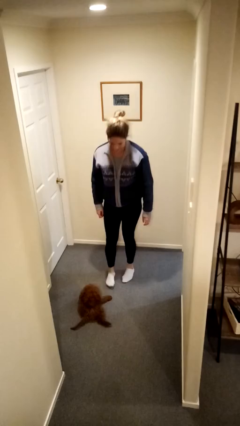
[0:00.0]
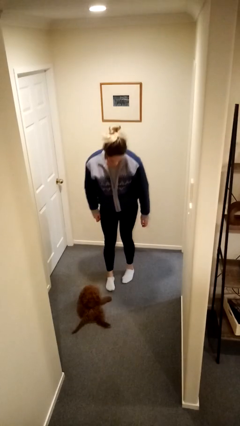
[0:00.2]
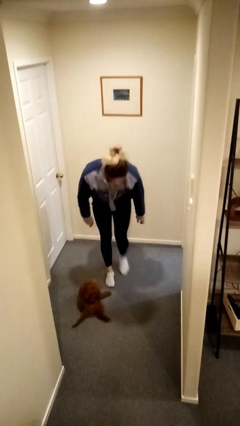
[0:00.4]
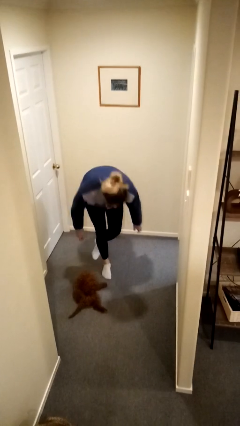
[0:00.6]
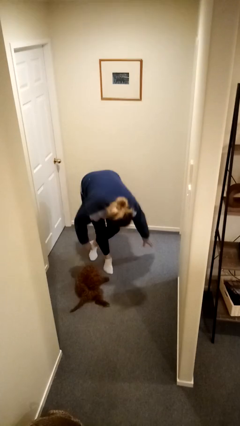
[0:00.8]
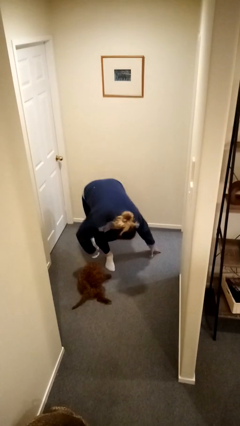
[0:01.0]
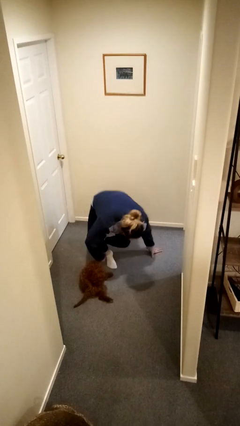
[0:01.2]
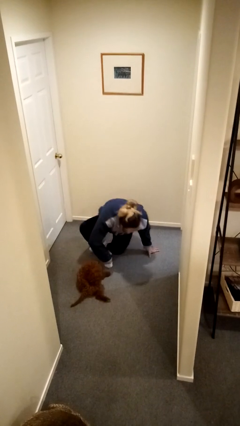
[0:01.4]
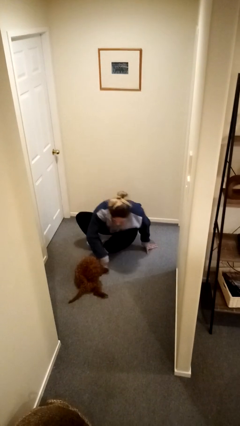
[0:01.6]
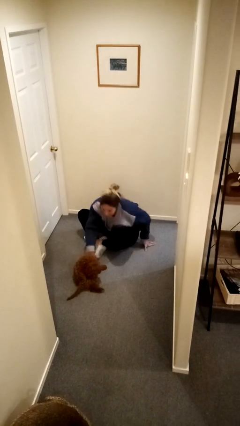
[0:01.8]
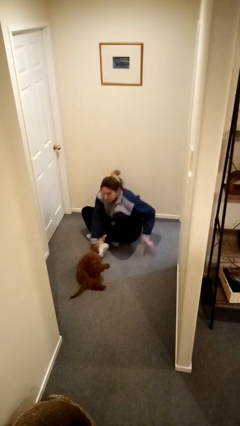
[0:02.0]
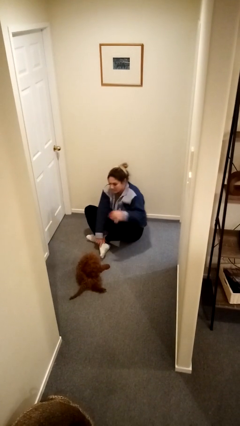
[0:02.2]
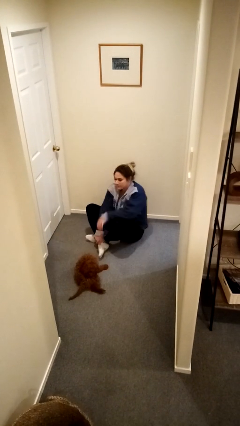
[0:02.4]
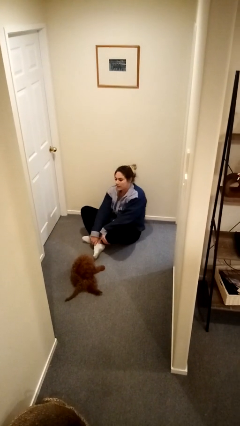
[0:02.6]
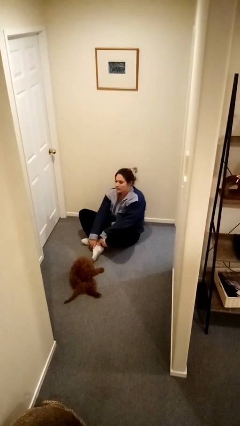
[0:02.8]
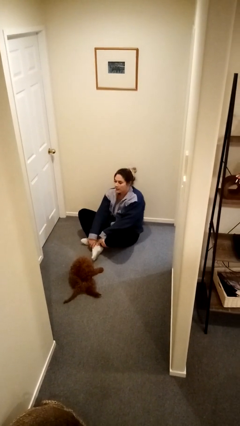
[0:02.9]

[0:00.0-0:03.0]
person sits crisscross

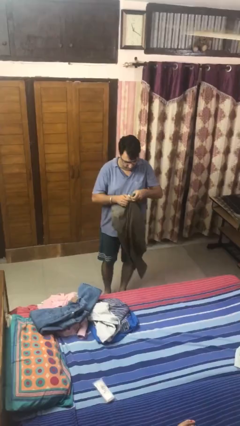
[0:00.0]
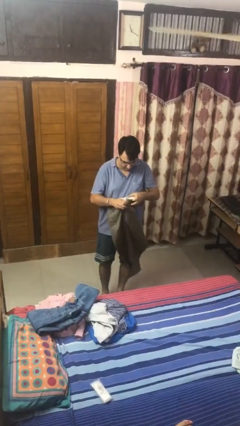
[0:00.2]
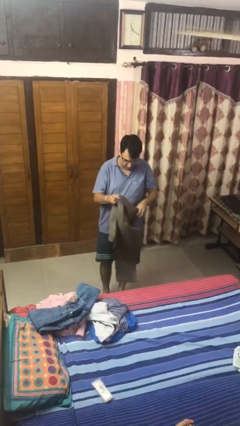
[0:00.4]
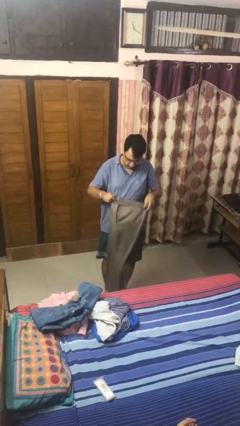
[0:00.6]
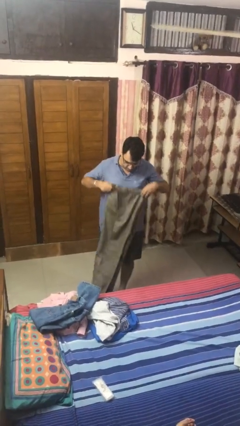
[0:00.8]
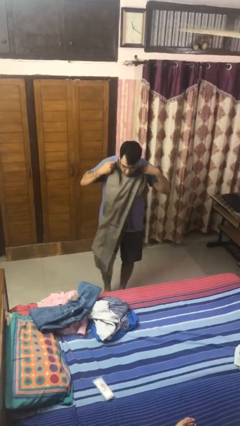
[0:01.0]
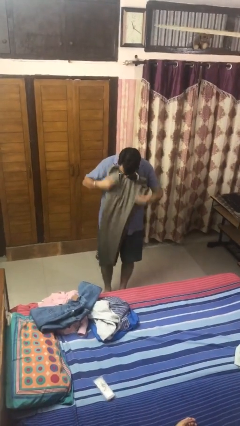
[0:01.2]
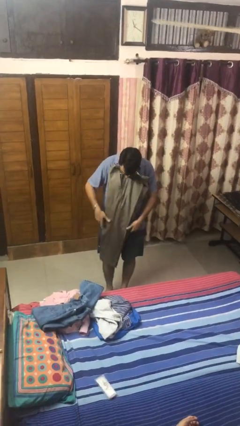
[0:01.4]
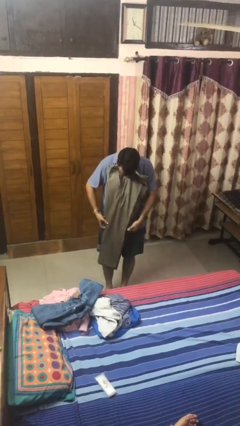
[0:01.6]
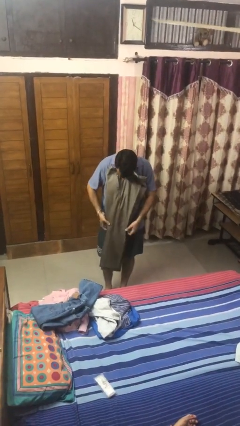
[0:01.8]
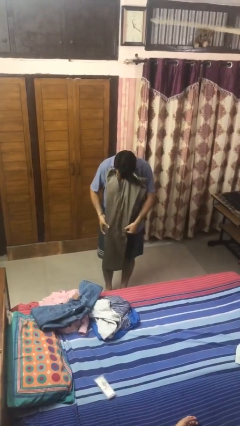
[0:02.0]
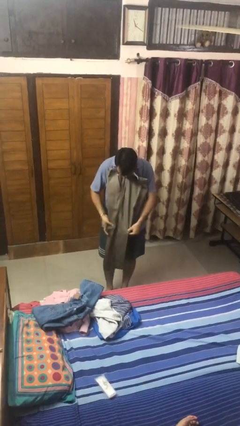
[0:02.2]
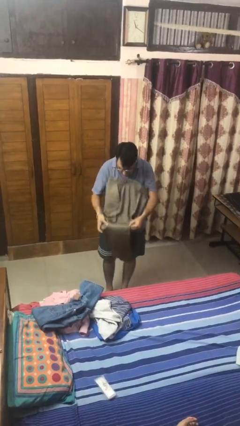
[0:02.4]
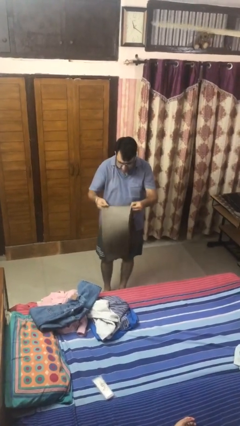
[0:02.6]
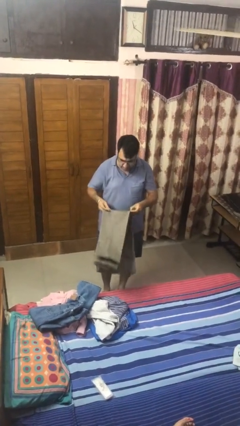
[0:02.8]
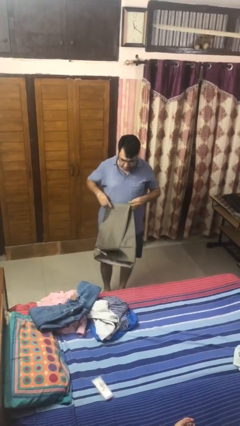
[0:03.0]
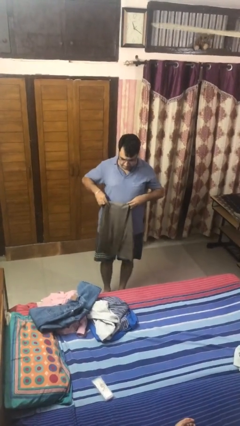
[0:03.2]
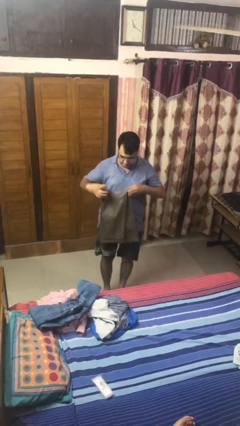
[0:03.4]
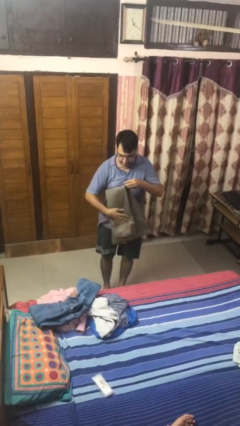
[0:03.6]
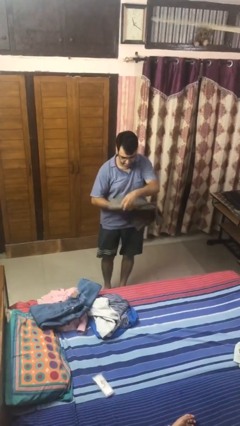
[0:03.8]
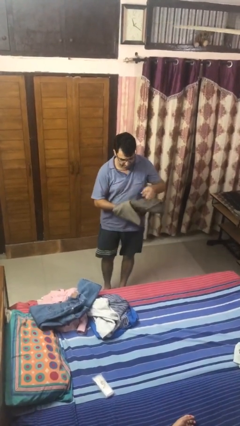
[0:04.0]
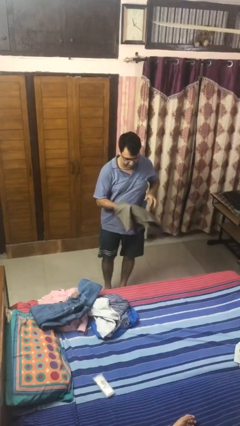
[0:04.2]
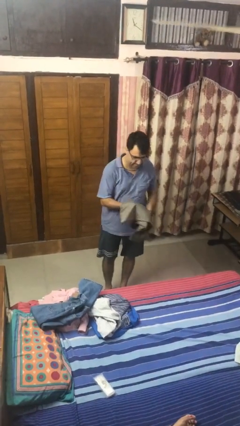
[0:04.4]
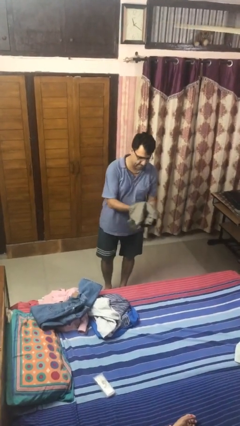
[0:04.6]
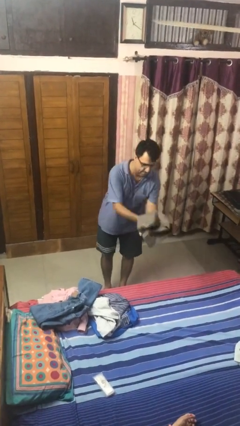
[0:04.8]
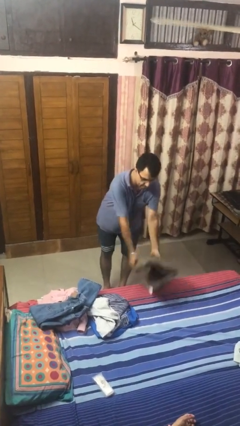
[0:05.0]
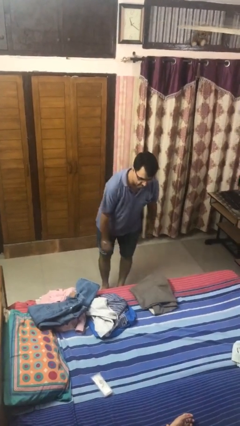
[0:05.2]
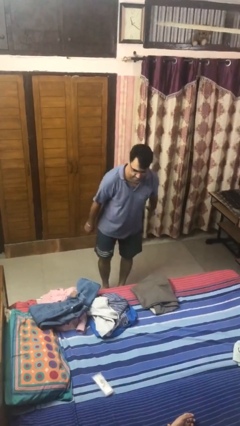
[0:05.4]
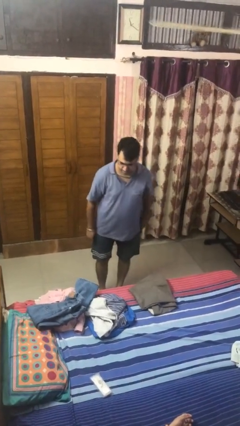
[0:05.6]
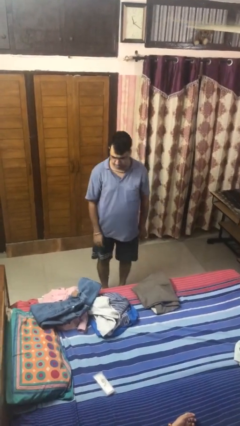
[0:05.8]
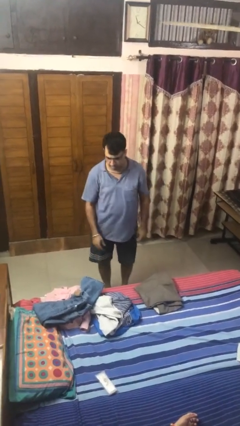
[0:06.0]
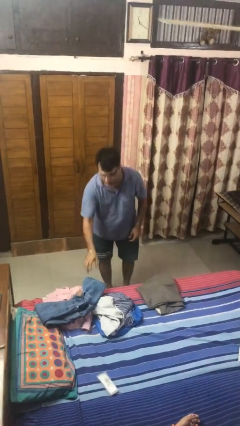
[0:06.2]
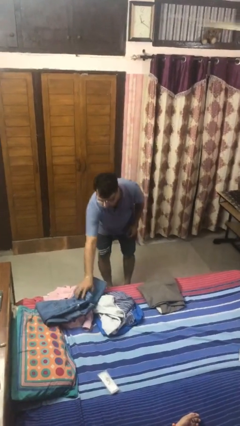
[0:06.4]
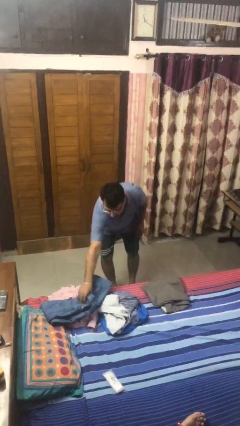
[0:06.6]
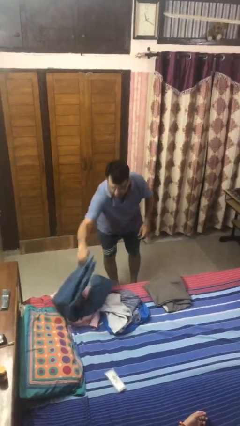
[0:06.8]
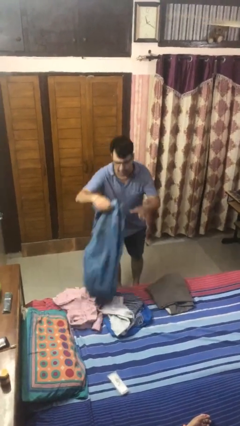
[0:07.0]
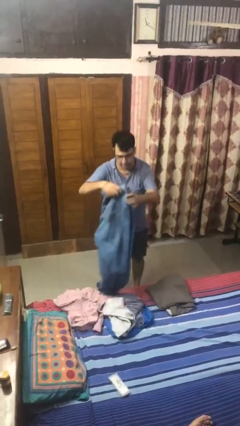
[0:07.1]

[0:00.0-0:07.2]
person folds pants

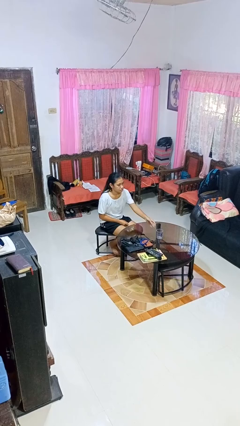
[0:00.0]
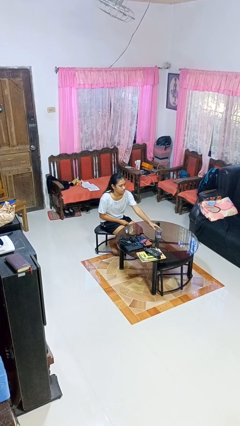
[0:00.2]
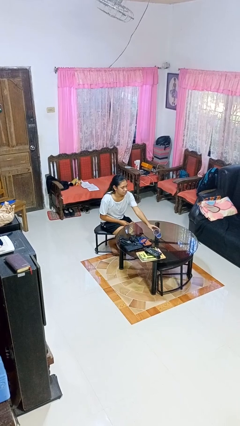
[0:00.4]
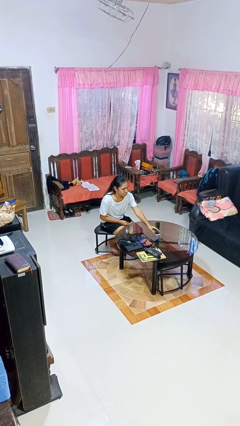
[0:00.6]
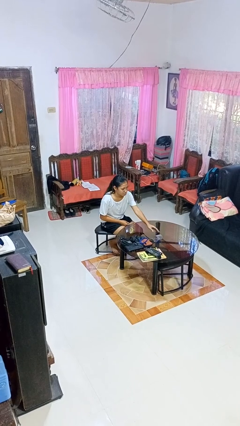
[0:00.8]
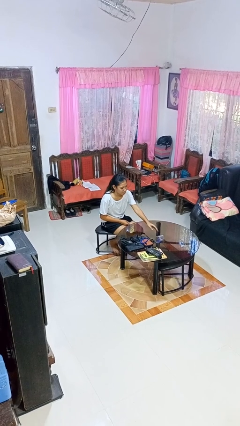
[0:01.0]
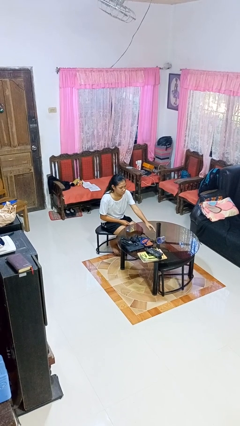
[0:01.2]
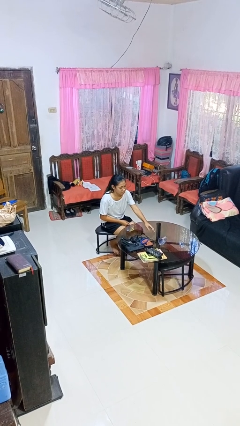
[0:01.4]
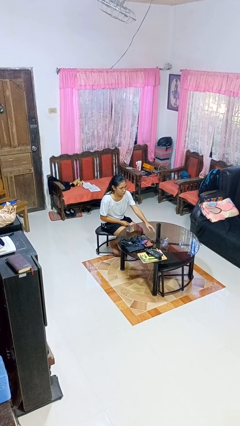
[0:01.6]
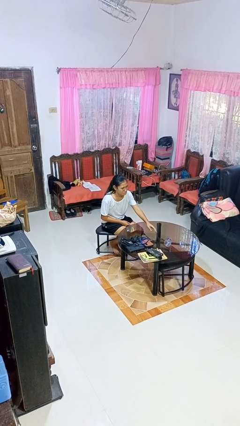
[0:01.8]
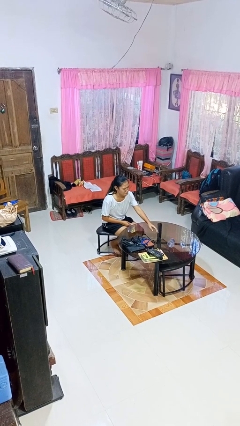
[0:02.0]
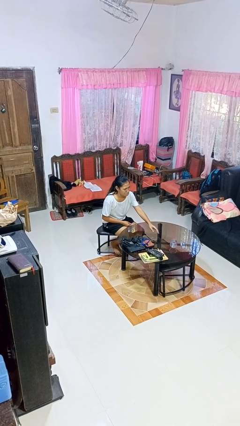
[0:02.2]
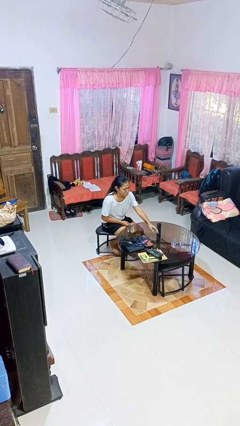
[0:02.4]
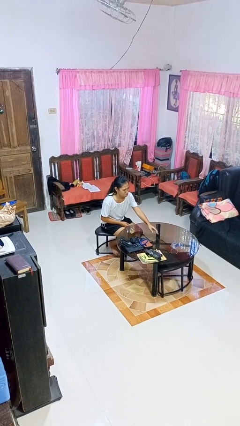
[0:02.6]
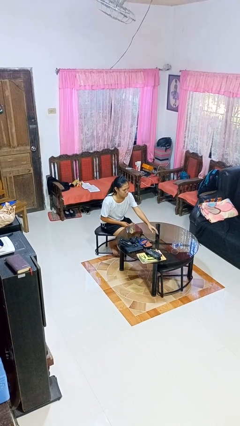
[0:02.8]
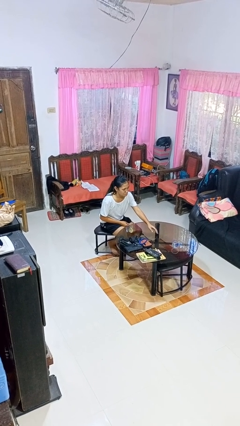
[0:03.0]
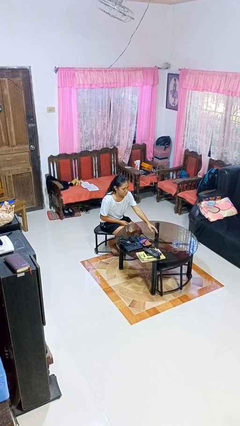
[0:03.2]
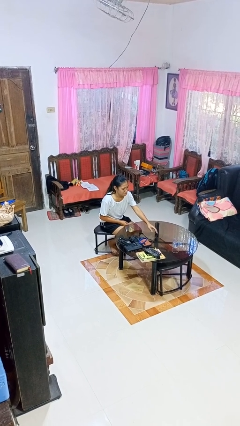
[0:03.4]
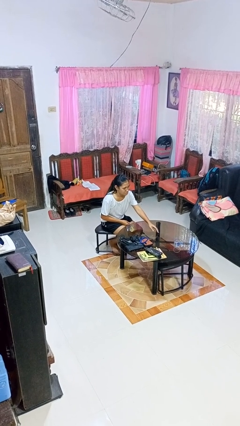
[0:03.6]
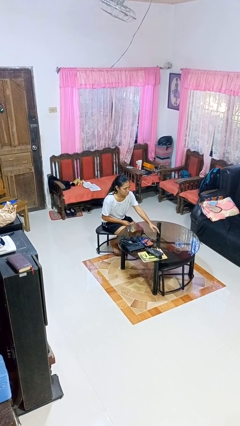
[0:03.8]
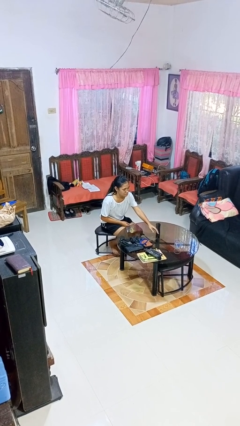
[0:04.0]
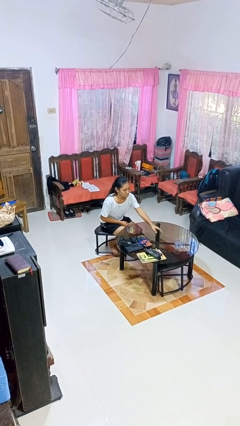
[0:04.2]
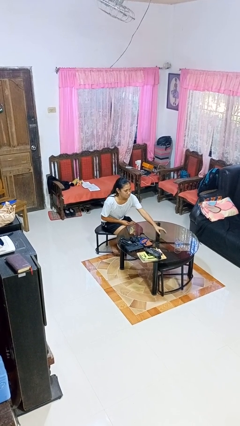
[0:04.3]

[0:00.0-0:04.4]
person knocks over glass

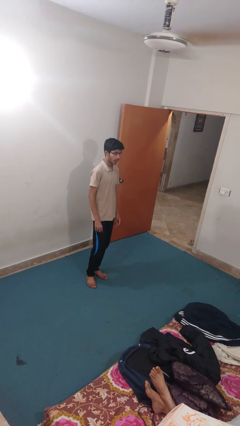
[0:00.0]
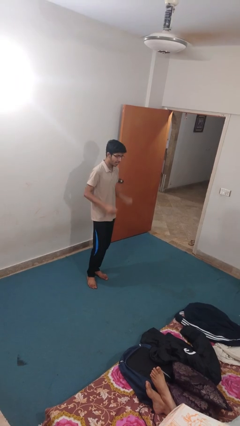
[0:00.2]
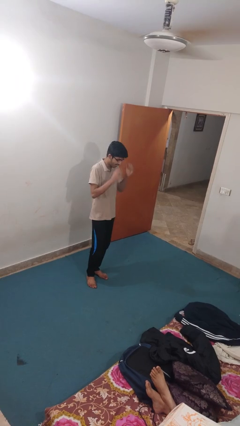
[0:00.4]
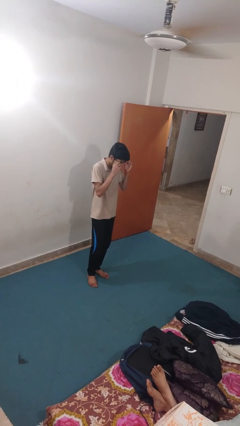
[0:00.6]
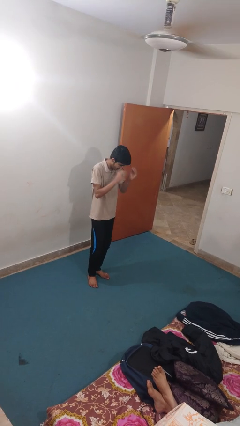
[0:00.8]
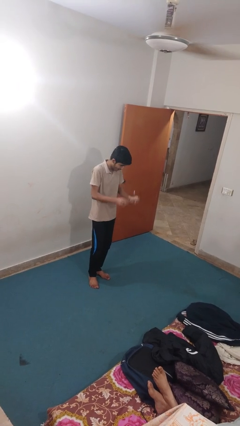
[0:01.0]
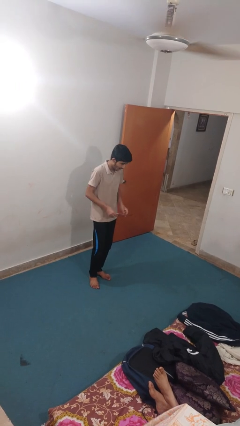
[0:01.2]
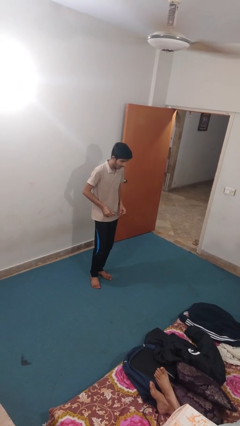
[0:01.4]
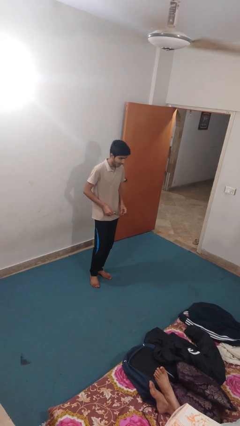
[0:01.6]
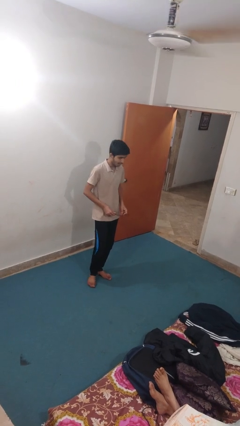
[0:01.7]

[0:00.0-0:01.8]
person takes off glasses

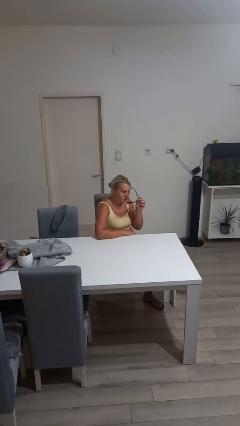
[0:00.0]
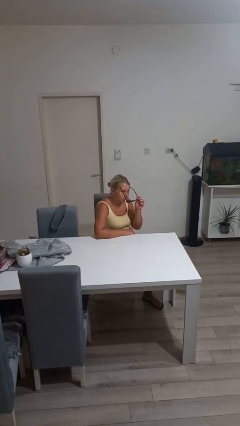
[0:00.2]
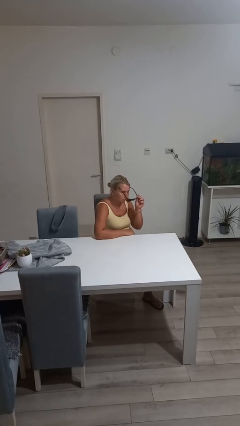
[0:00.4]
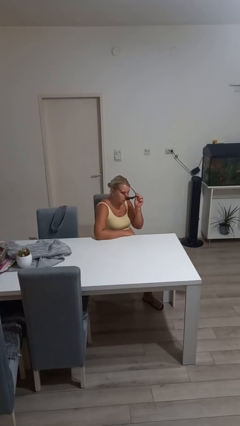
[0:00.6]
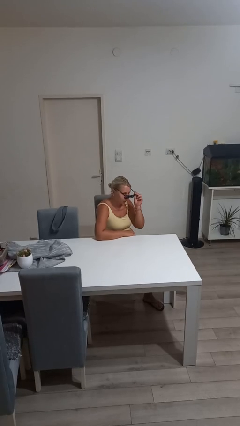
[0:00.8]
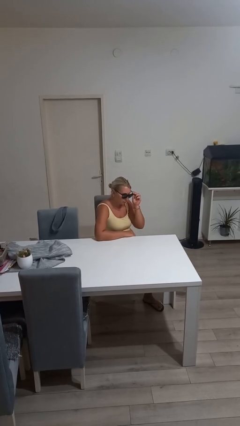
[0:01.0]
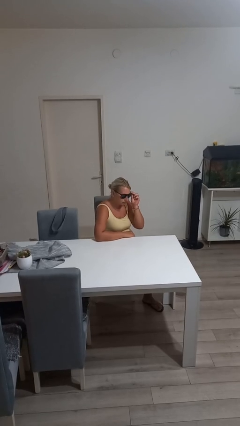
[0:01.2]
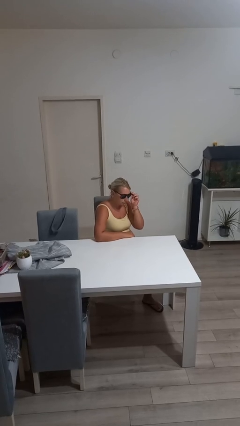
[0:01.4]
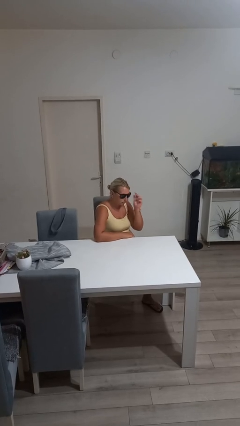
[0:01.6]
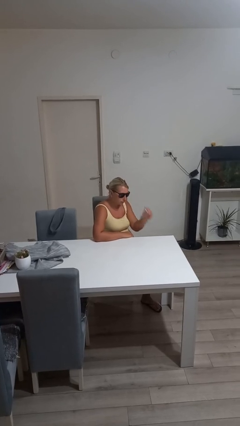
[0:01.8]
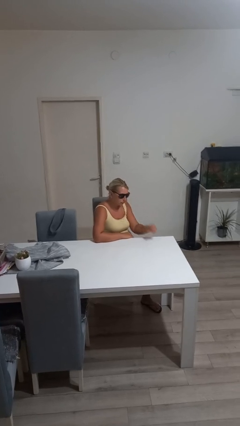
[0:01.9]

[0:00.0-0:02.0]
person puts on sunglasses
